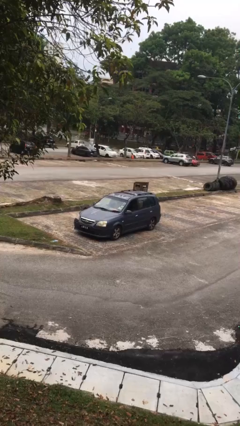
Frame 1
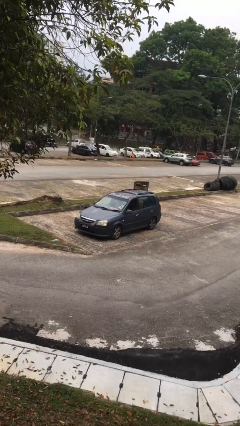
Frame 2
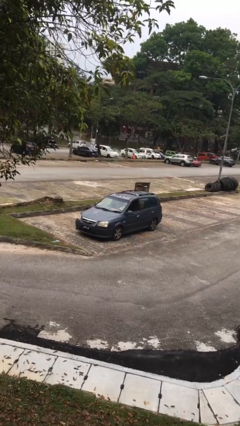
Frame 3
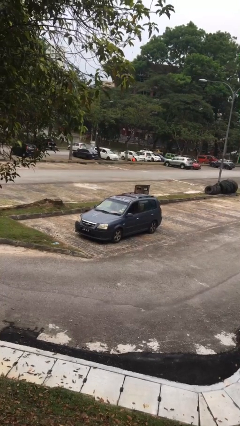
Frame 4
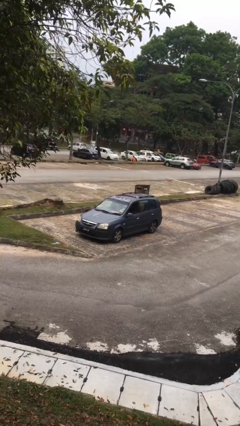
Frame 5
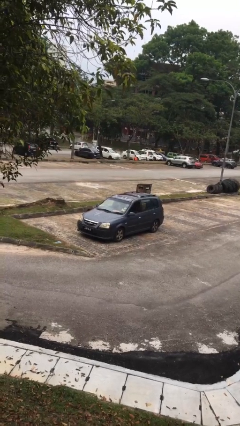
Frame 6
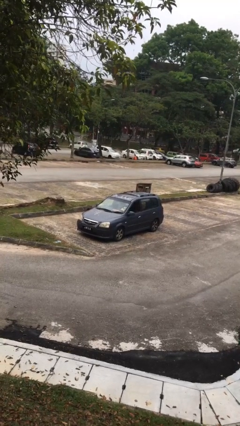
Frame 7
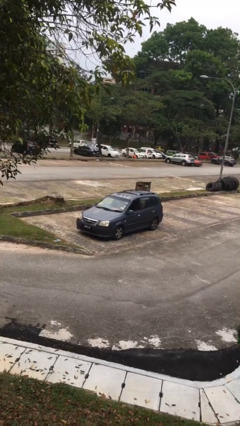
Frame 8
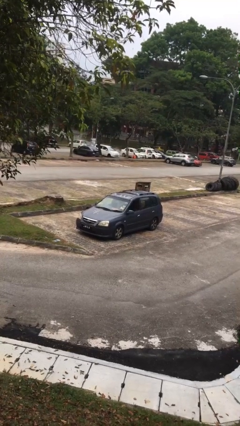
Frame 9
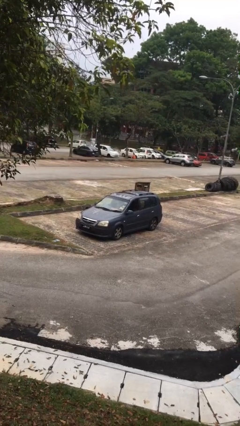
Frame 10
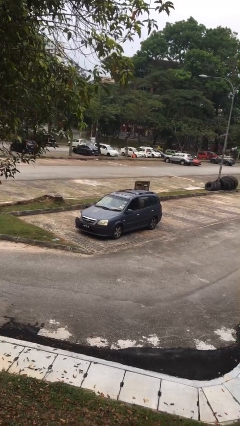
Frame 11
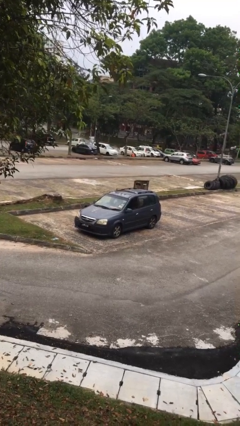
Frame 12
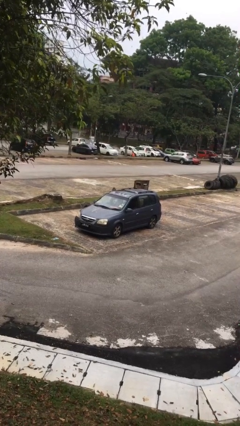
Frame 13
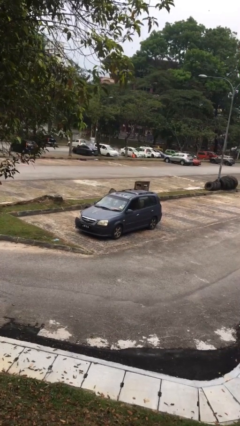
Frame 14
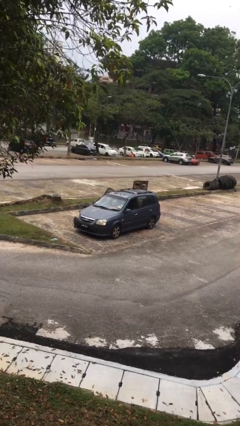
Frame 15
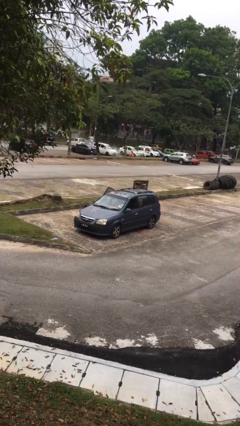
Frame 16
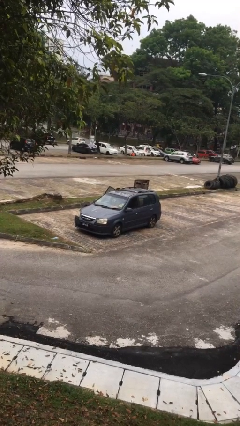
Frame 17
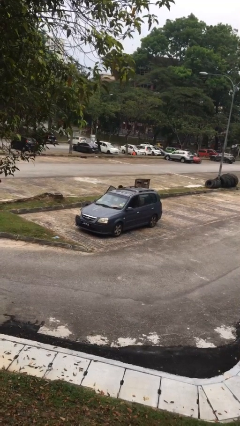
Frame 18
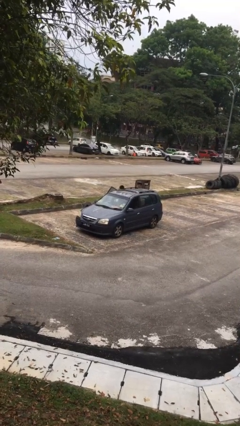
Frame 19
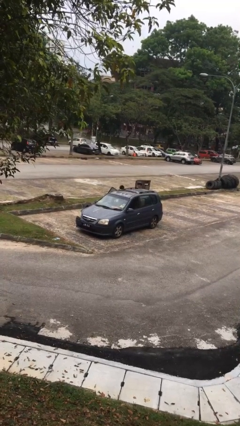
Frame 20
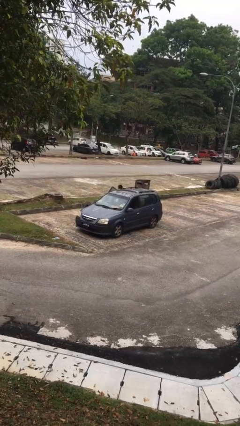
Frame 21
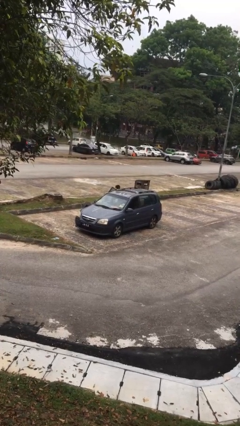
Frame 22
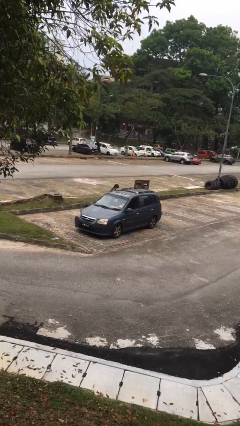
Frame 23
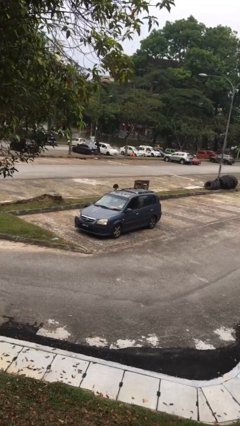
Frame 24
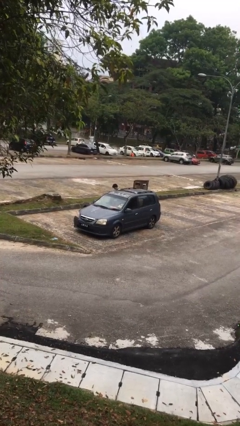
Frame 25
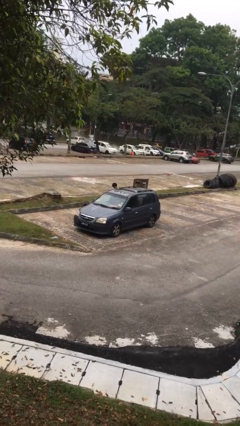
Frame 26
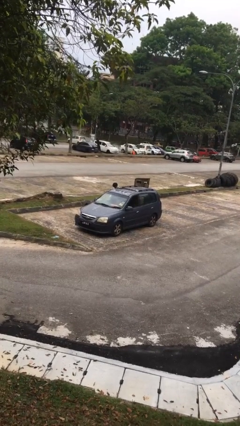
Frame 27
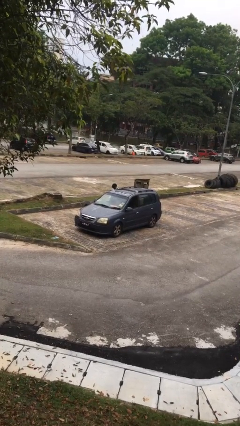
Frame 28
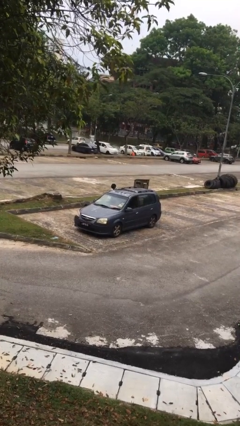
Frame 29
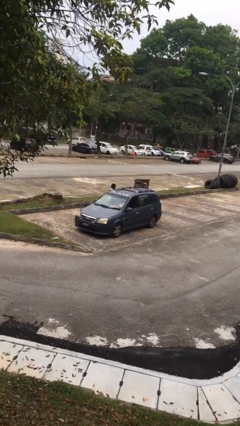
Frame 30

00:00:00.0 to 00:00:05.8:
car drops off person

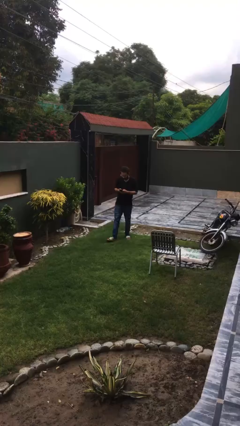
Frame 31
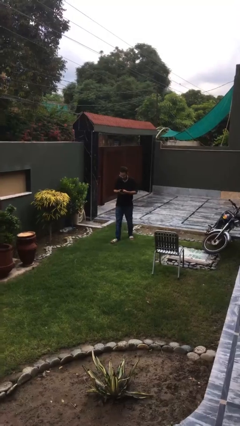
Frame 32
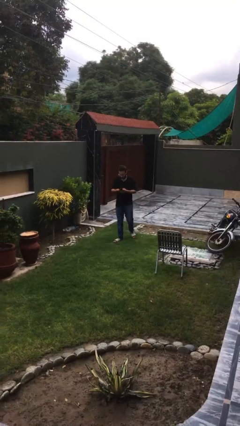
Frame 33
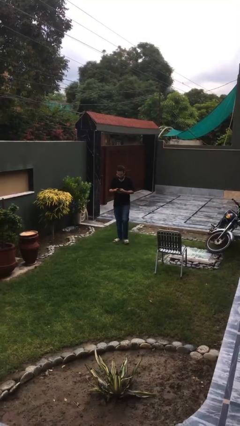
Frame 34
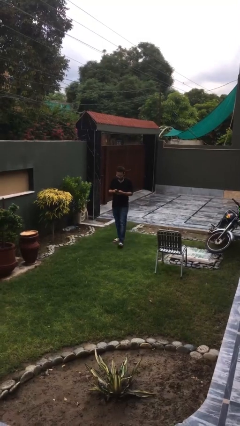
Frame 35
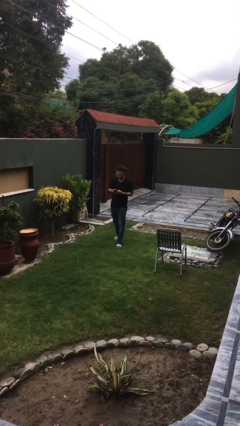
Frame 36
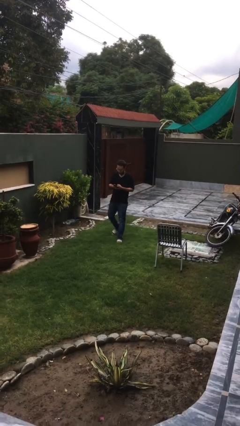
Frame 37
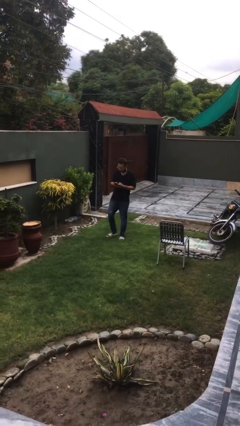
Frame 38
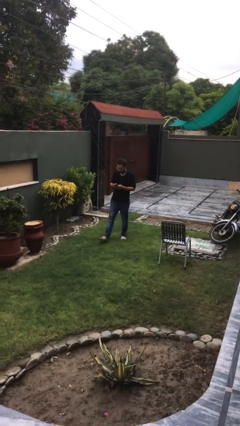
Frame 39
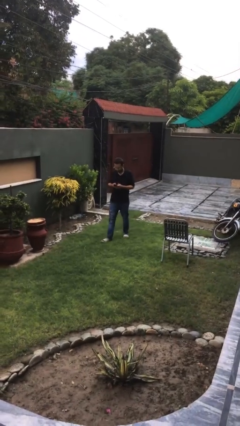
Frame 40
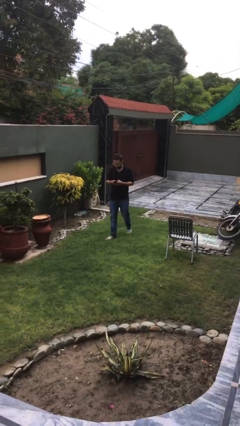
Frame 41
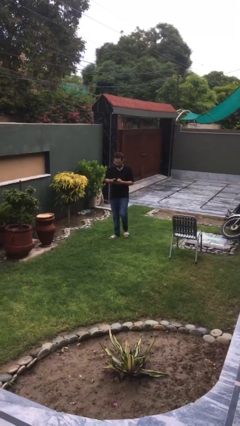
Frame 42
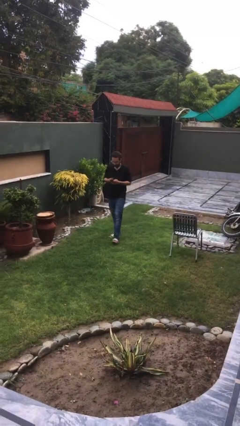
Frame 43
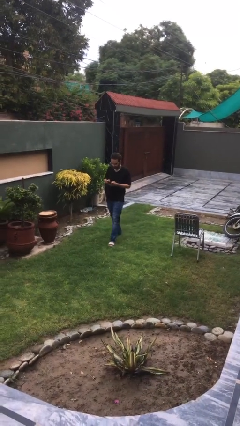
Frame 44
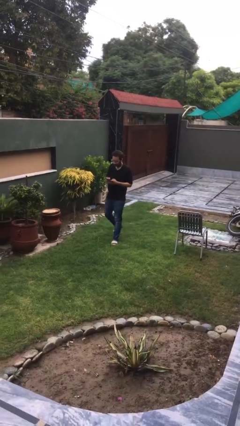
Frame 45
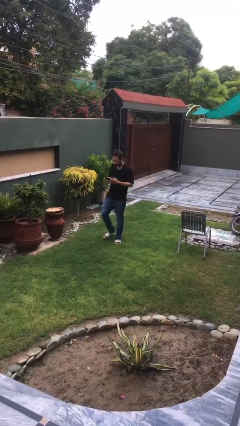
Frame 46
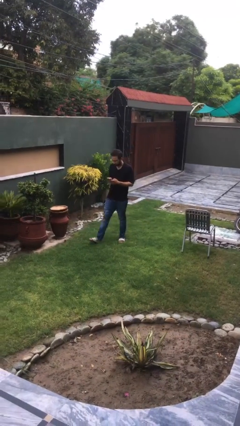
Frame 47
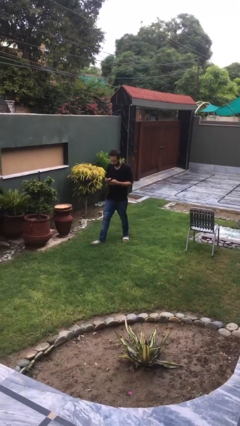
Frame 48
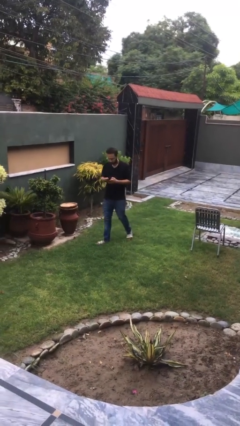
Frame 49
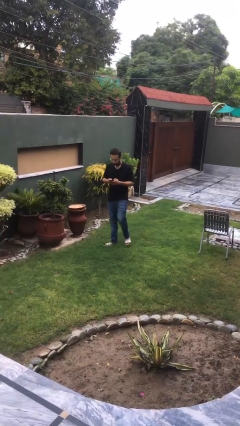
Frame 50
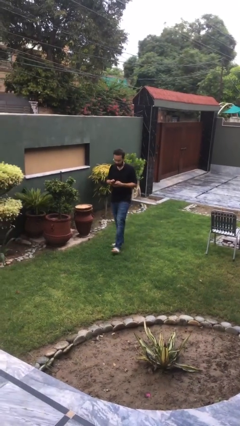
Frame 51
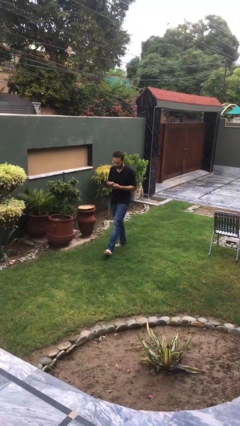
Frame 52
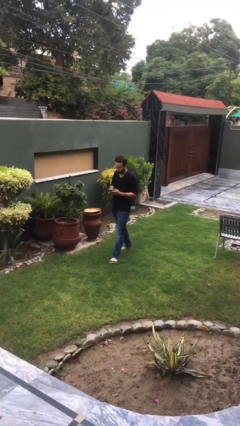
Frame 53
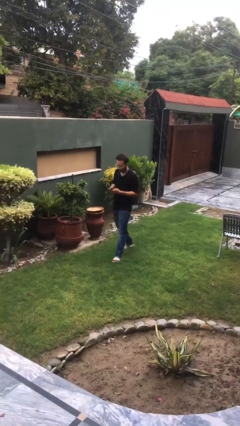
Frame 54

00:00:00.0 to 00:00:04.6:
person texts on phone

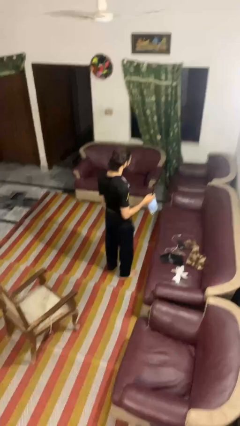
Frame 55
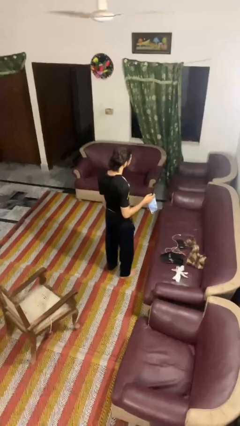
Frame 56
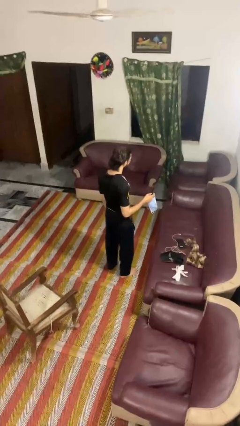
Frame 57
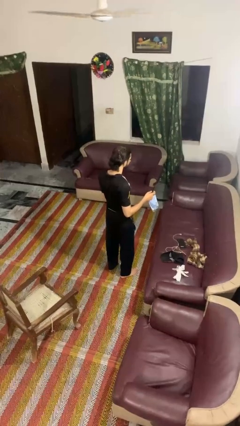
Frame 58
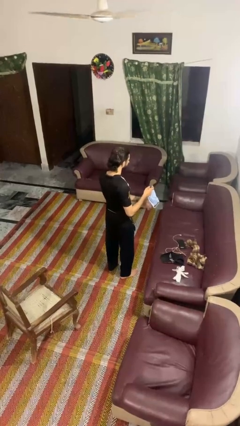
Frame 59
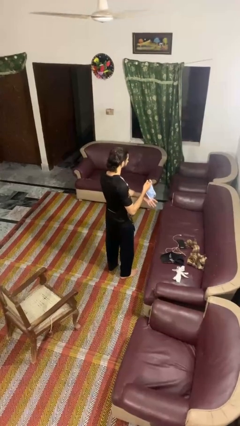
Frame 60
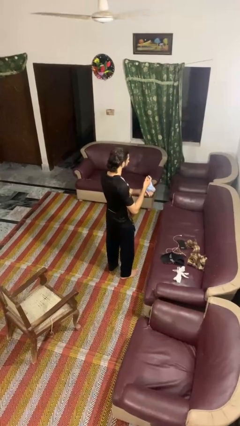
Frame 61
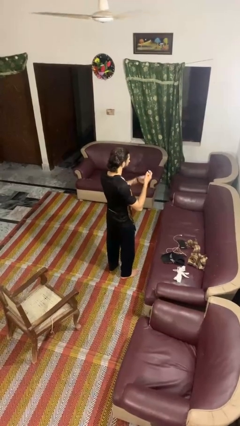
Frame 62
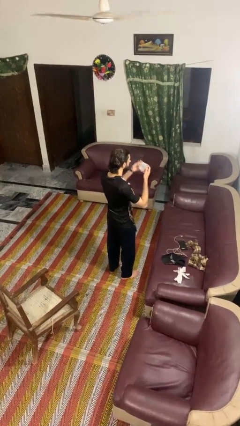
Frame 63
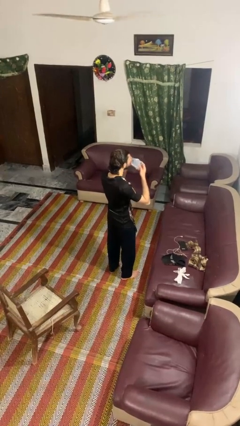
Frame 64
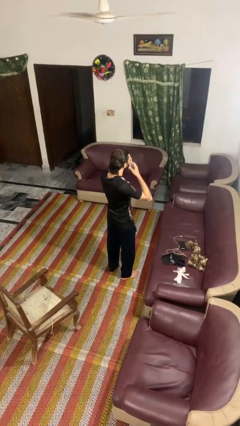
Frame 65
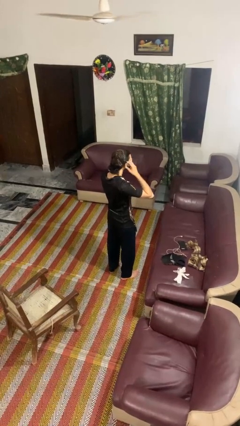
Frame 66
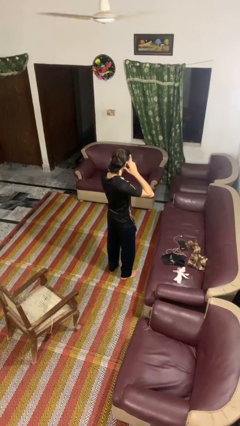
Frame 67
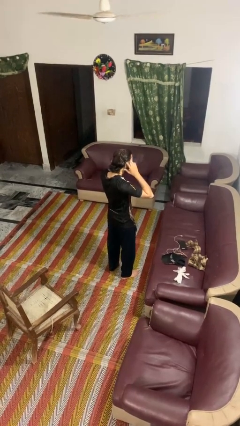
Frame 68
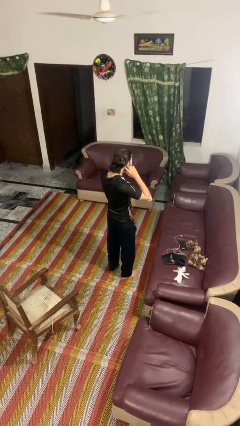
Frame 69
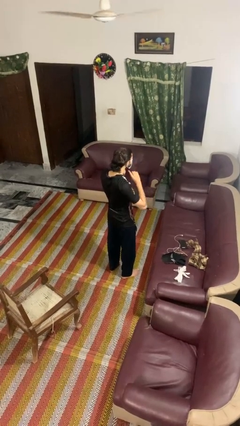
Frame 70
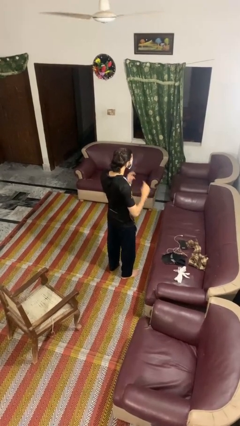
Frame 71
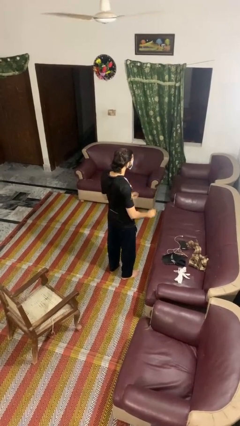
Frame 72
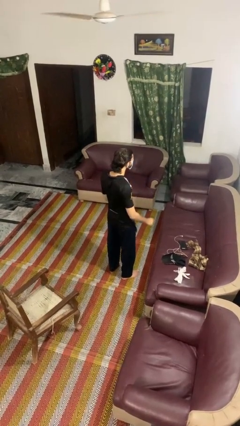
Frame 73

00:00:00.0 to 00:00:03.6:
person puts on facemask

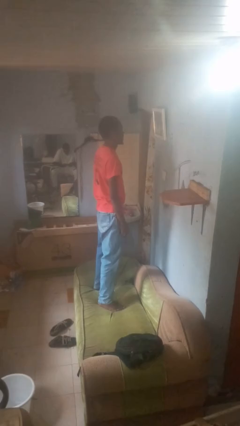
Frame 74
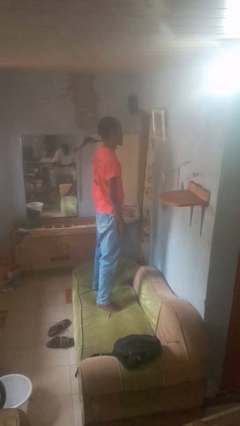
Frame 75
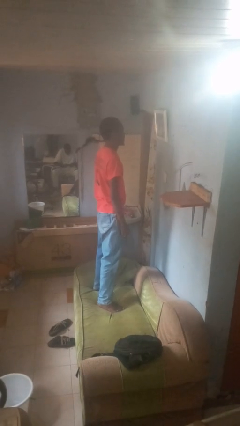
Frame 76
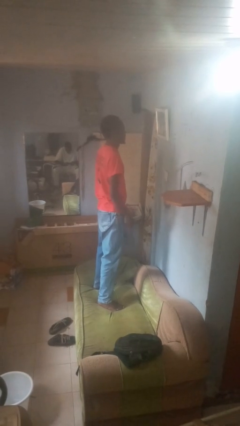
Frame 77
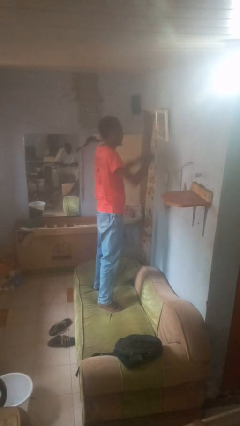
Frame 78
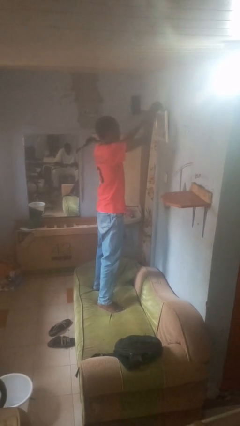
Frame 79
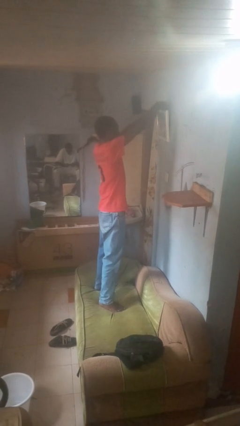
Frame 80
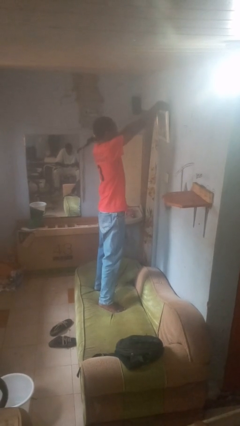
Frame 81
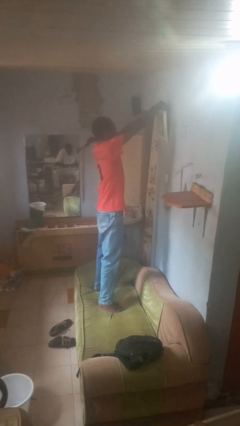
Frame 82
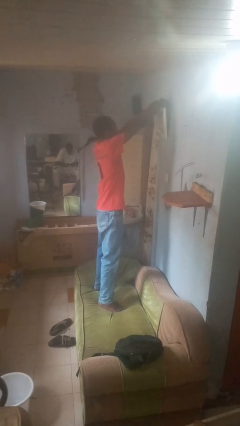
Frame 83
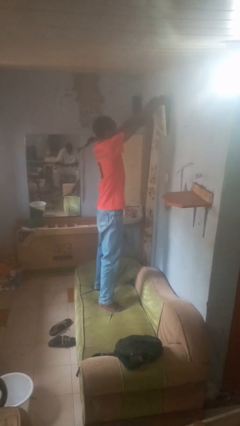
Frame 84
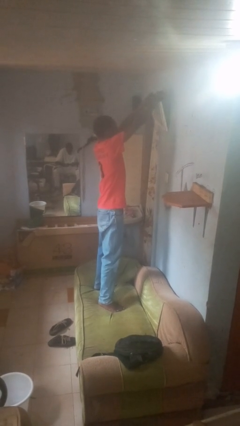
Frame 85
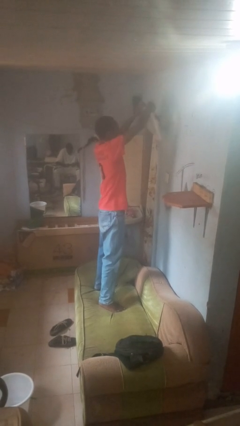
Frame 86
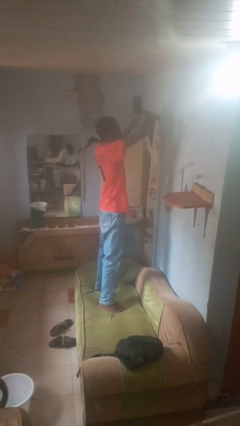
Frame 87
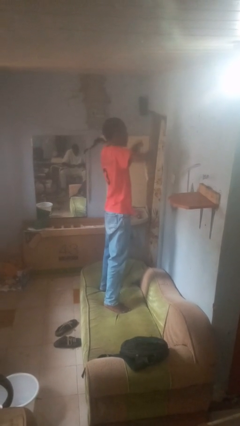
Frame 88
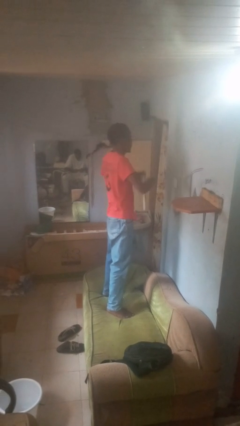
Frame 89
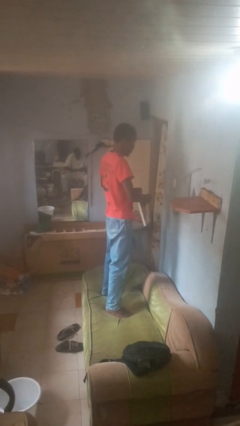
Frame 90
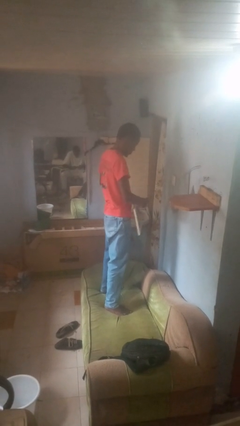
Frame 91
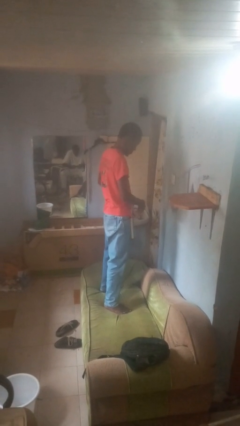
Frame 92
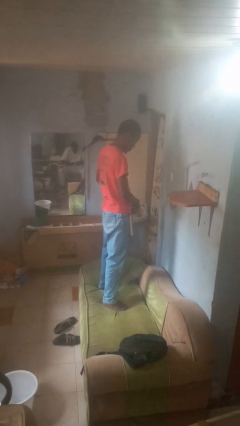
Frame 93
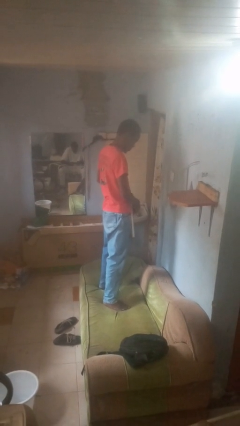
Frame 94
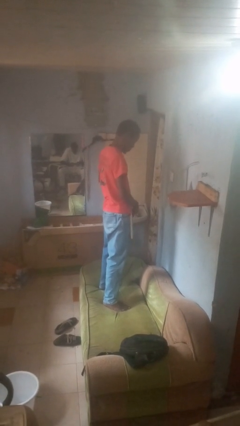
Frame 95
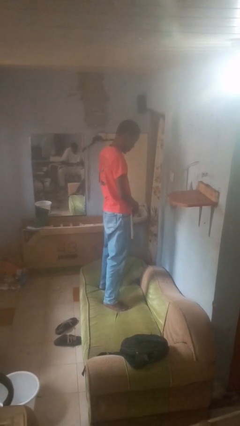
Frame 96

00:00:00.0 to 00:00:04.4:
person takes down picture frame
